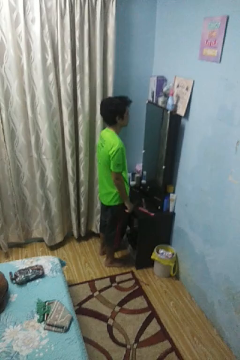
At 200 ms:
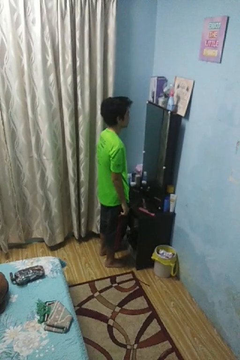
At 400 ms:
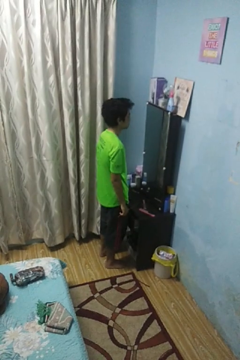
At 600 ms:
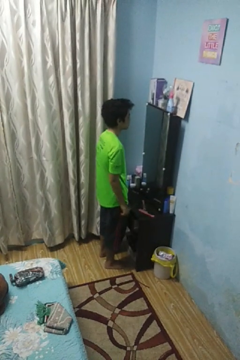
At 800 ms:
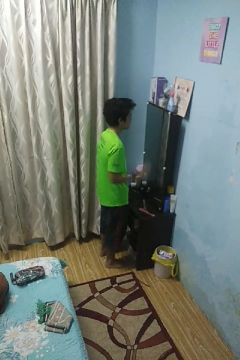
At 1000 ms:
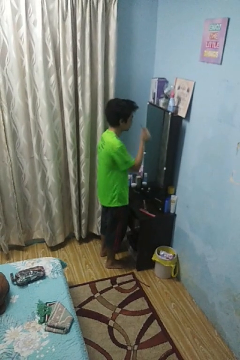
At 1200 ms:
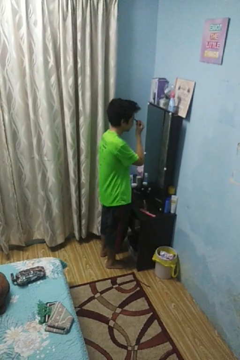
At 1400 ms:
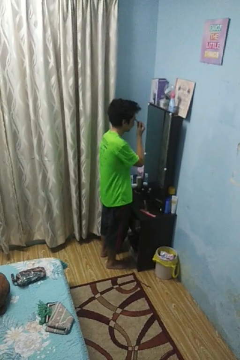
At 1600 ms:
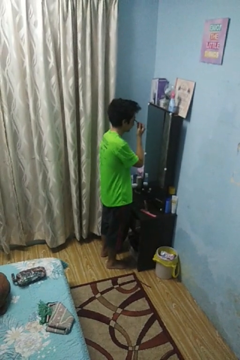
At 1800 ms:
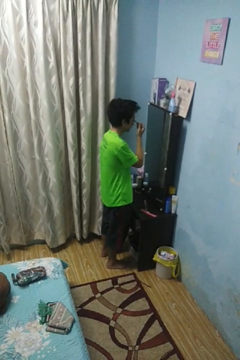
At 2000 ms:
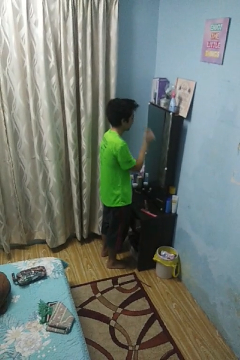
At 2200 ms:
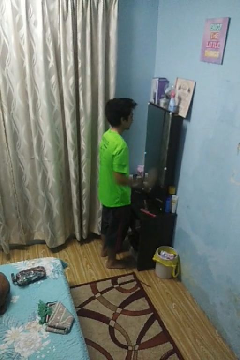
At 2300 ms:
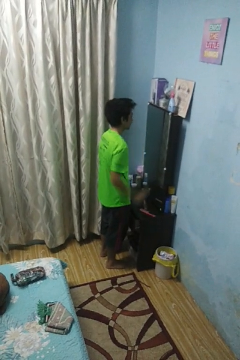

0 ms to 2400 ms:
person applies eye makeup

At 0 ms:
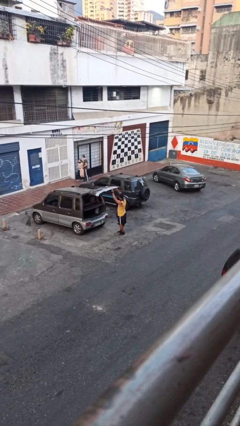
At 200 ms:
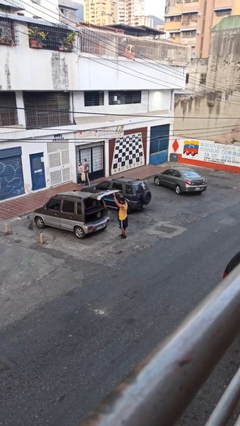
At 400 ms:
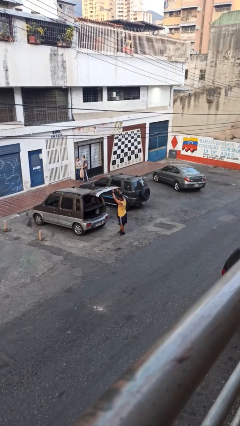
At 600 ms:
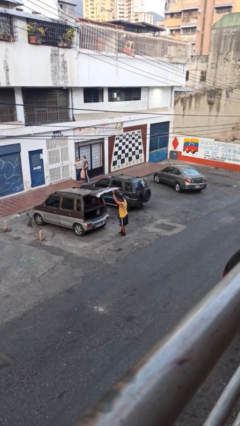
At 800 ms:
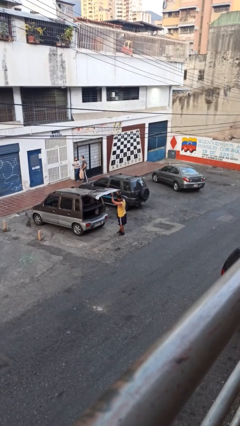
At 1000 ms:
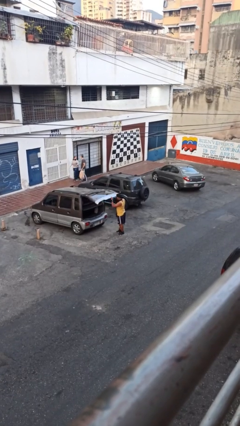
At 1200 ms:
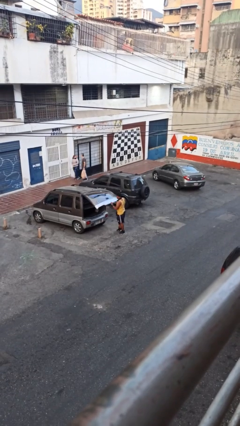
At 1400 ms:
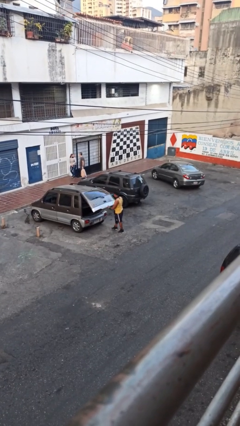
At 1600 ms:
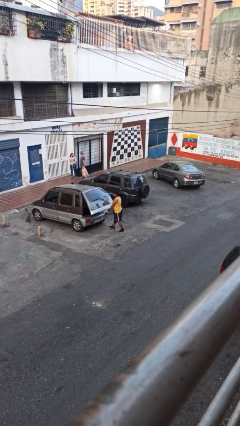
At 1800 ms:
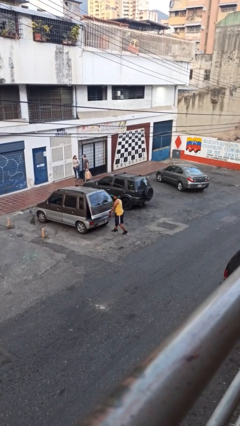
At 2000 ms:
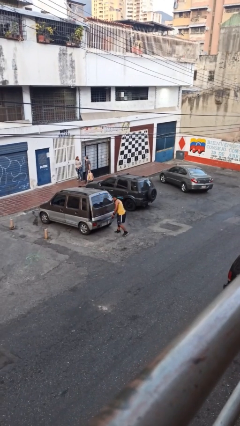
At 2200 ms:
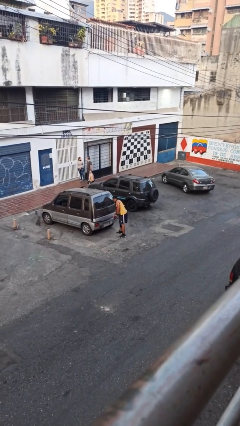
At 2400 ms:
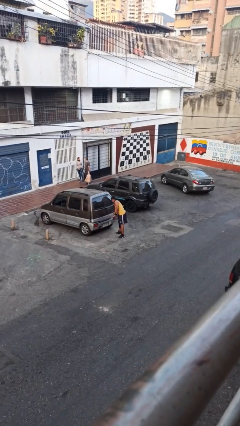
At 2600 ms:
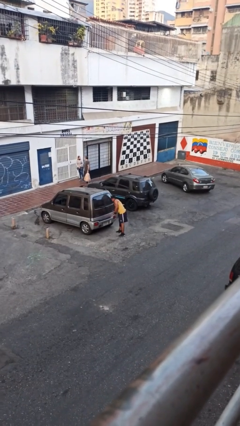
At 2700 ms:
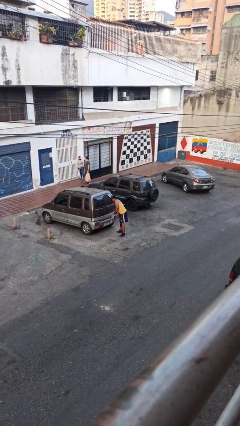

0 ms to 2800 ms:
person closes car trunk

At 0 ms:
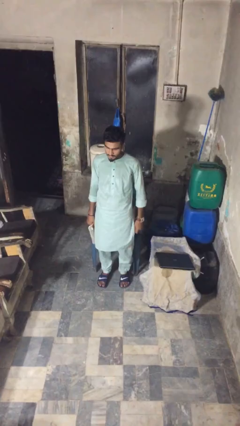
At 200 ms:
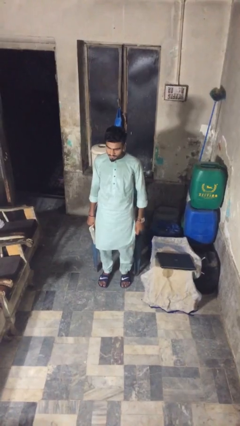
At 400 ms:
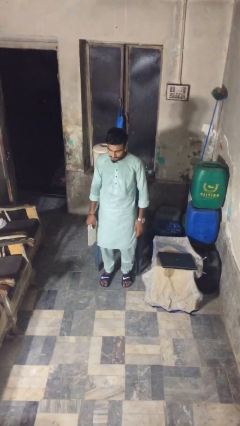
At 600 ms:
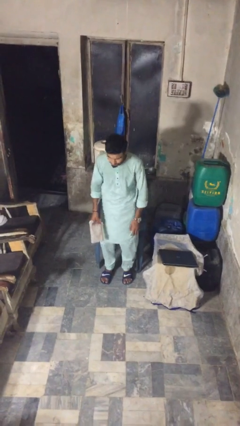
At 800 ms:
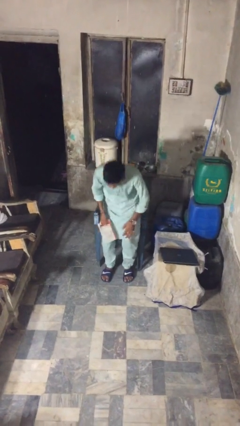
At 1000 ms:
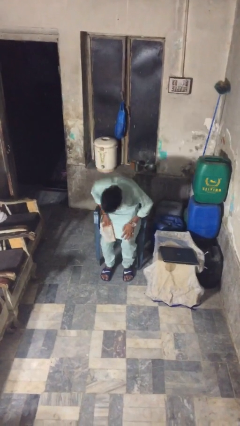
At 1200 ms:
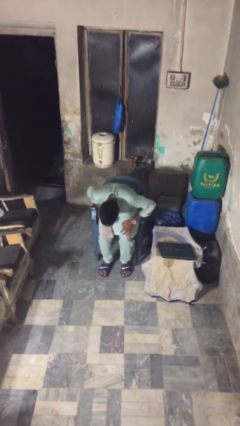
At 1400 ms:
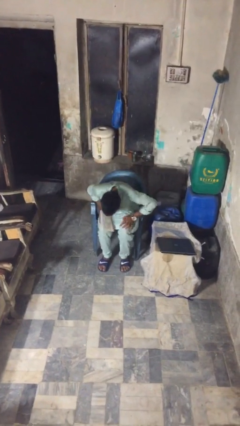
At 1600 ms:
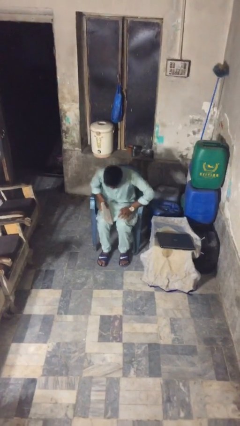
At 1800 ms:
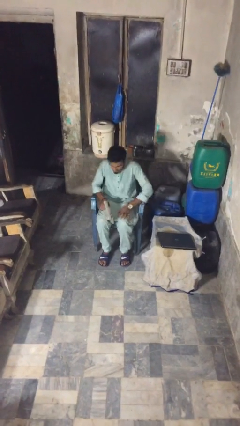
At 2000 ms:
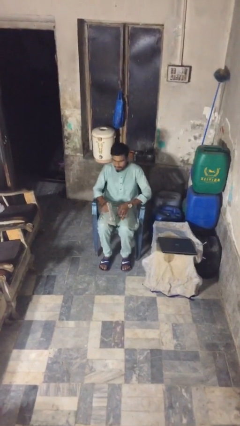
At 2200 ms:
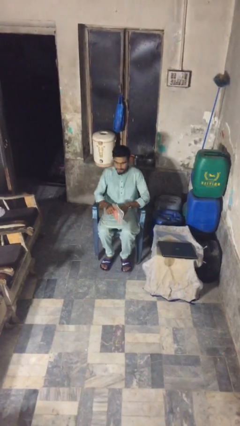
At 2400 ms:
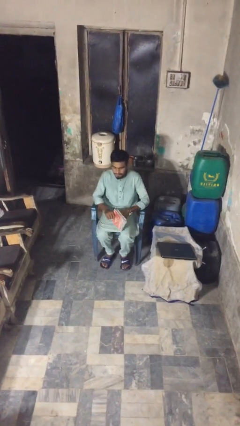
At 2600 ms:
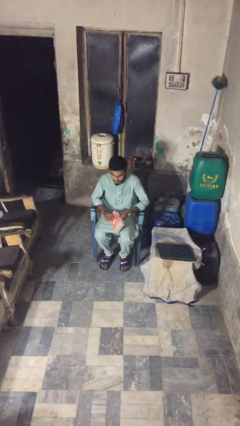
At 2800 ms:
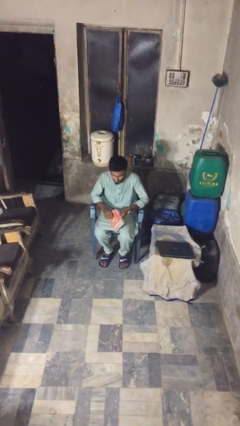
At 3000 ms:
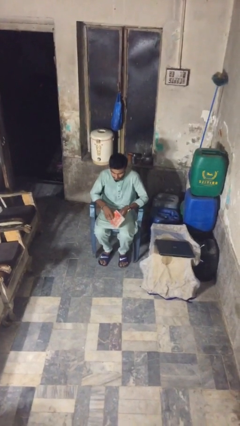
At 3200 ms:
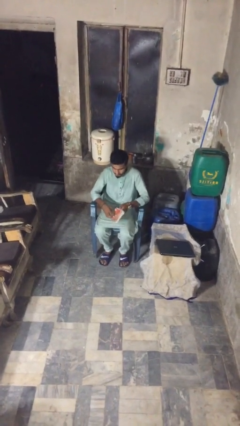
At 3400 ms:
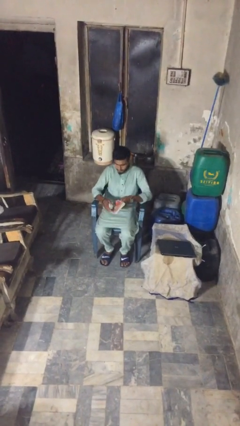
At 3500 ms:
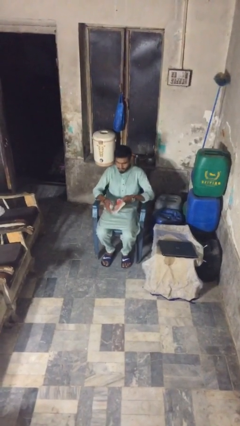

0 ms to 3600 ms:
person sits down

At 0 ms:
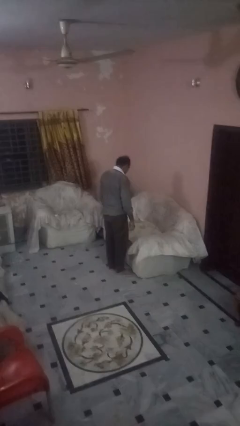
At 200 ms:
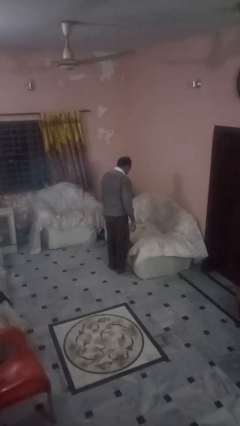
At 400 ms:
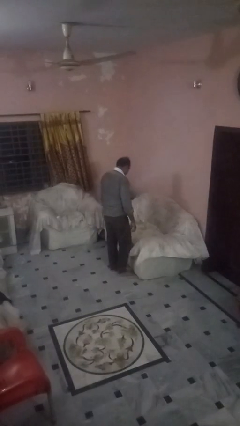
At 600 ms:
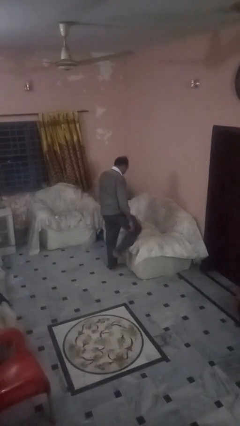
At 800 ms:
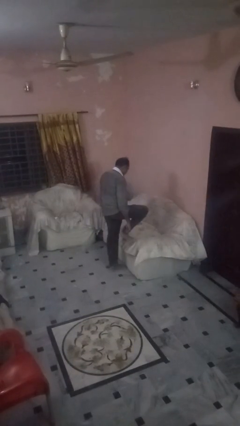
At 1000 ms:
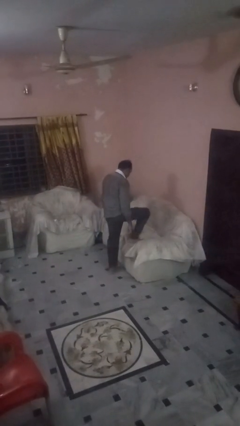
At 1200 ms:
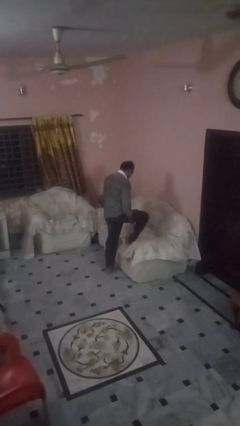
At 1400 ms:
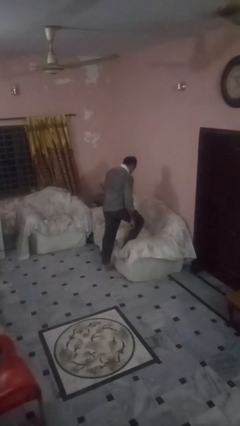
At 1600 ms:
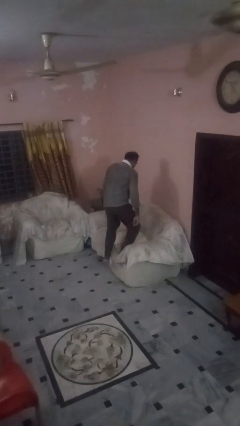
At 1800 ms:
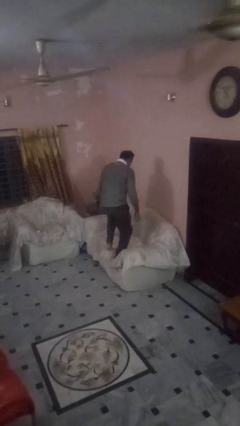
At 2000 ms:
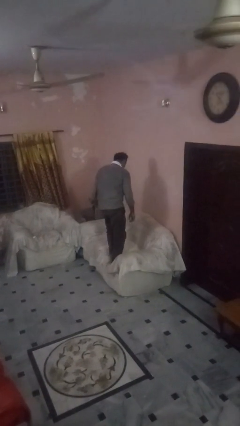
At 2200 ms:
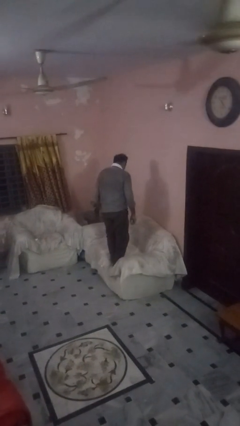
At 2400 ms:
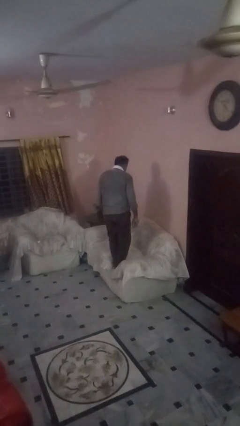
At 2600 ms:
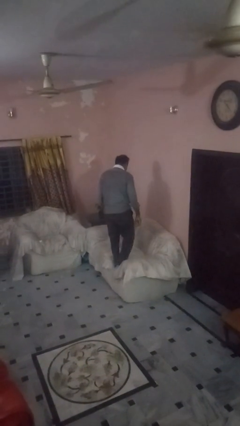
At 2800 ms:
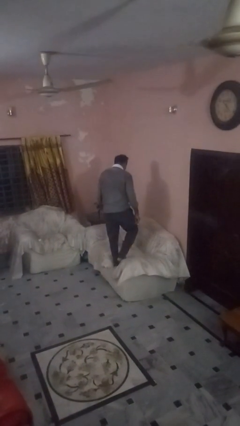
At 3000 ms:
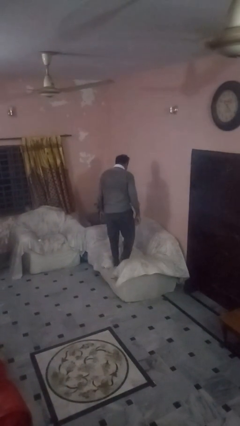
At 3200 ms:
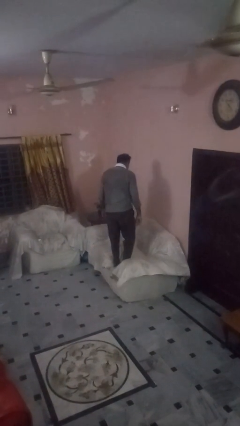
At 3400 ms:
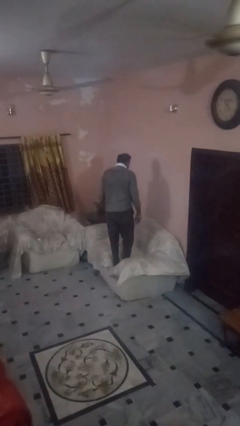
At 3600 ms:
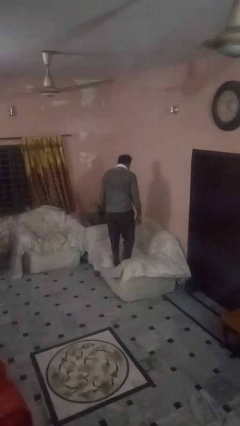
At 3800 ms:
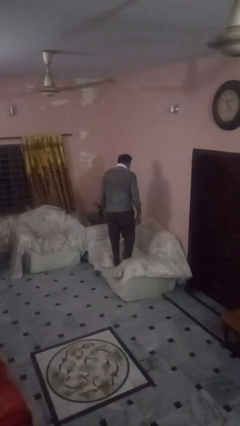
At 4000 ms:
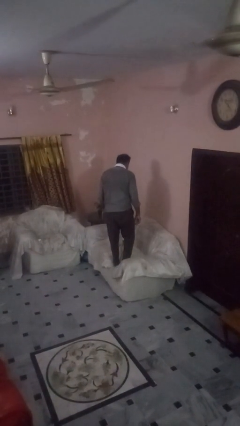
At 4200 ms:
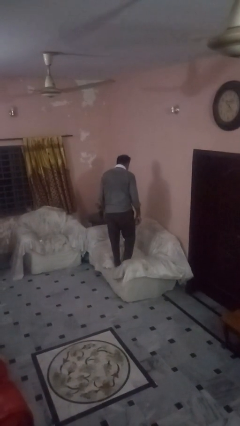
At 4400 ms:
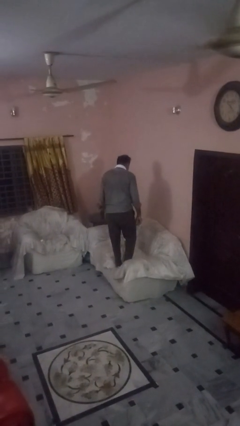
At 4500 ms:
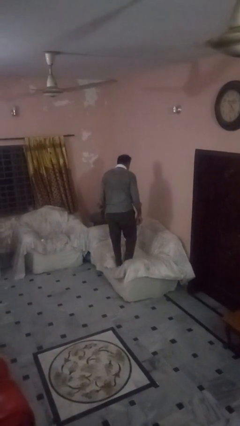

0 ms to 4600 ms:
person climbs on couch

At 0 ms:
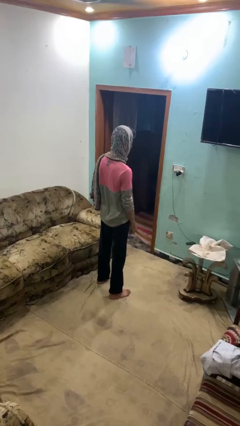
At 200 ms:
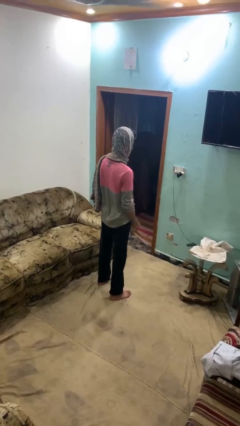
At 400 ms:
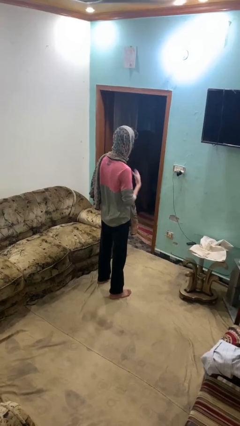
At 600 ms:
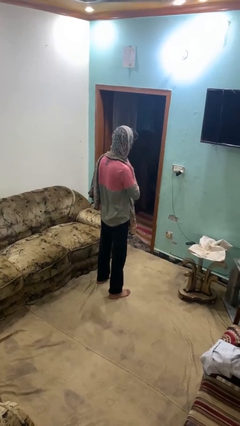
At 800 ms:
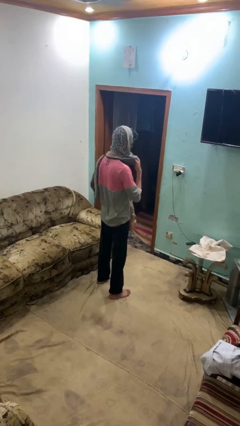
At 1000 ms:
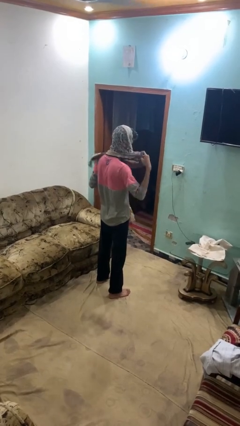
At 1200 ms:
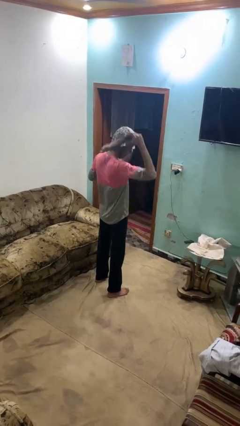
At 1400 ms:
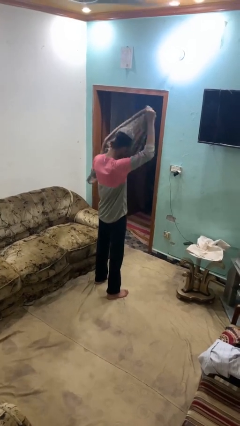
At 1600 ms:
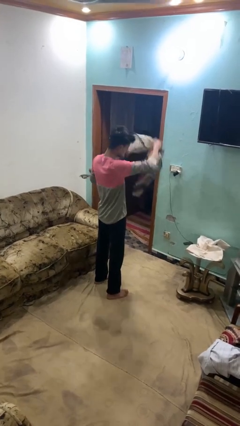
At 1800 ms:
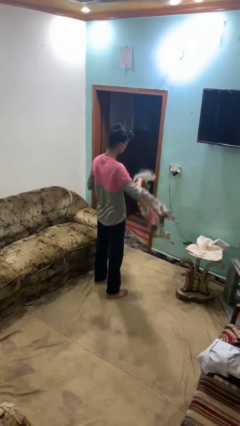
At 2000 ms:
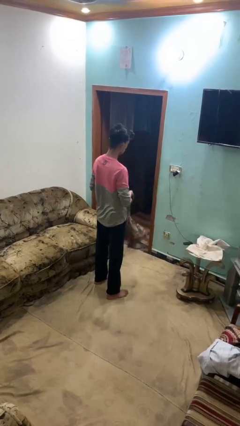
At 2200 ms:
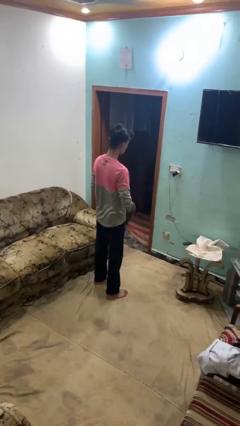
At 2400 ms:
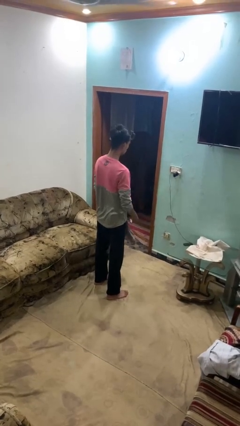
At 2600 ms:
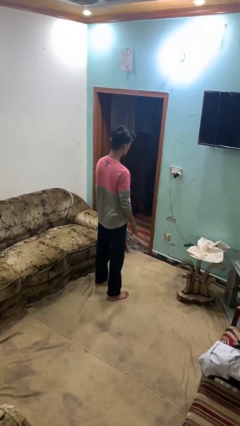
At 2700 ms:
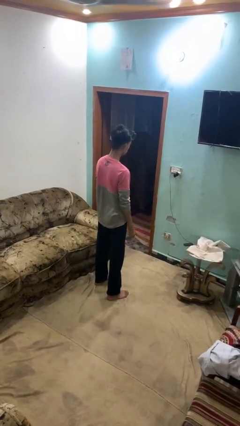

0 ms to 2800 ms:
person takes off scarf

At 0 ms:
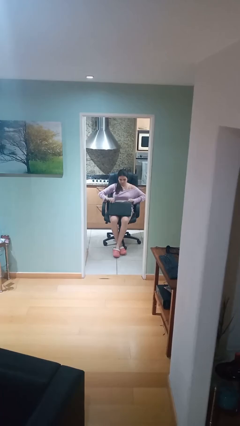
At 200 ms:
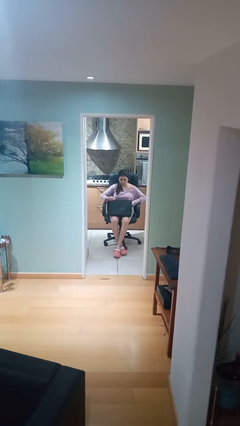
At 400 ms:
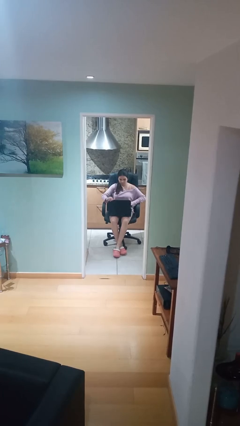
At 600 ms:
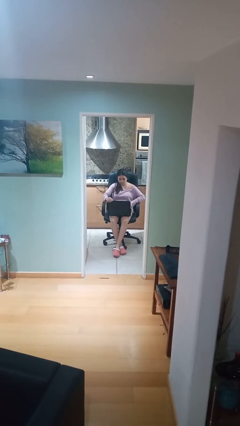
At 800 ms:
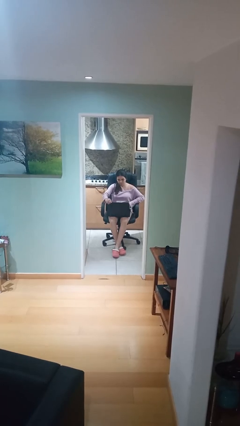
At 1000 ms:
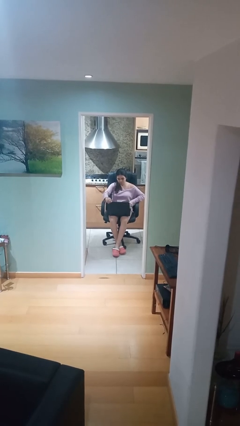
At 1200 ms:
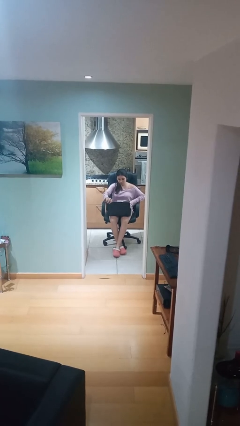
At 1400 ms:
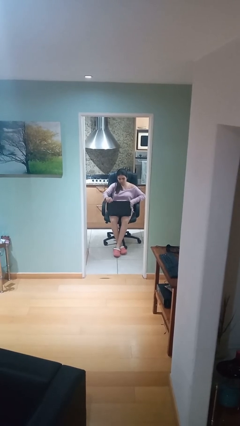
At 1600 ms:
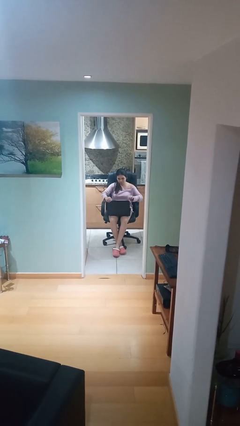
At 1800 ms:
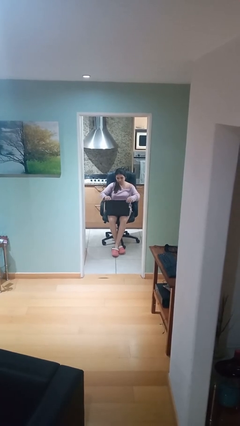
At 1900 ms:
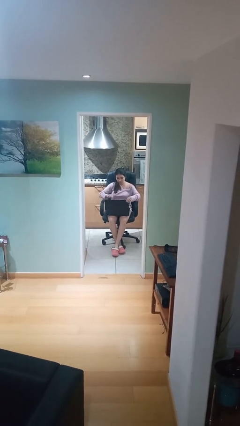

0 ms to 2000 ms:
person interacts with laptop
